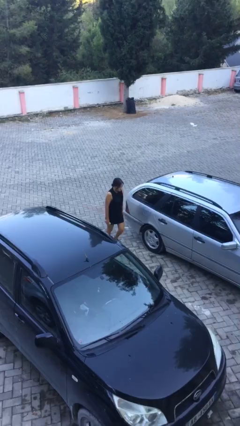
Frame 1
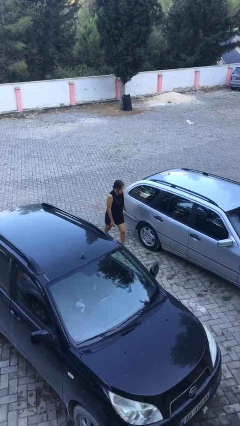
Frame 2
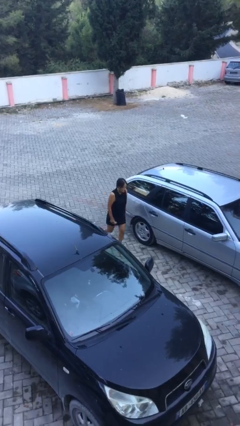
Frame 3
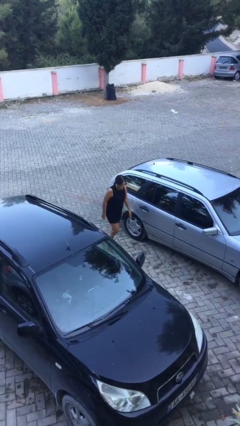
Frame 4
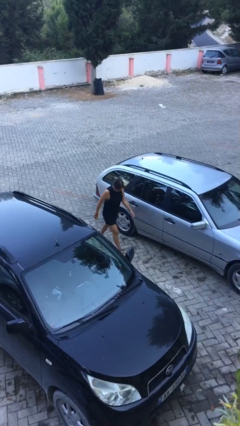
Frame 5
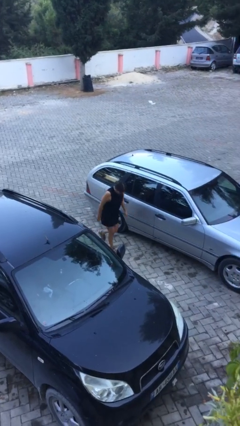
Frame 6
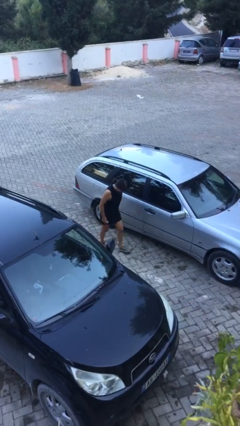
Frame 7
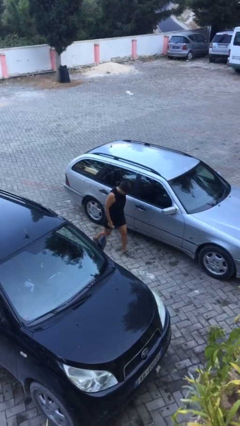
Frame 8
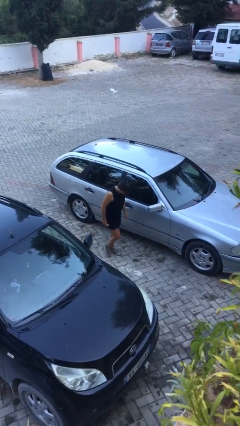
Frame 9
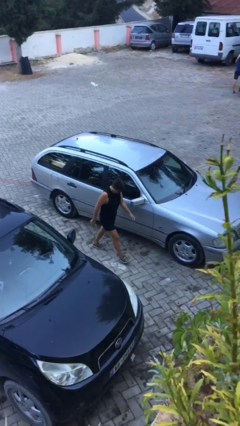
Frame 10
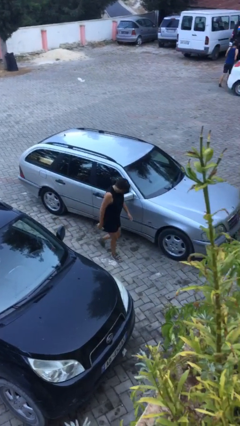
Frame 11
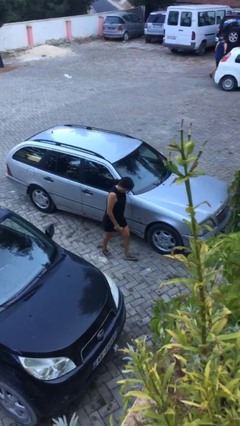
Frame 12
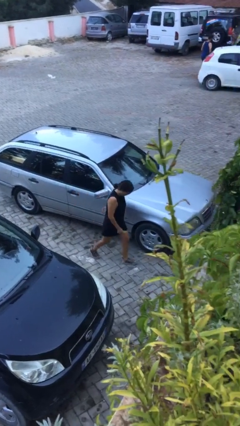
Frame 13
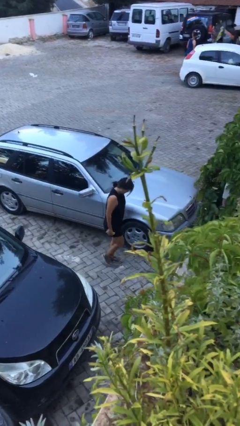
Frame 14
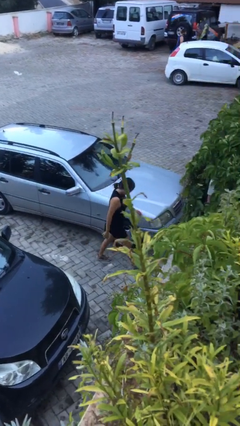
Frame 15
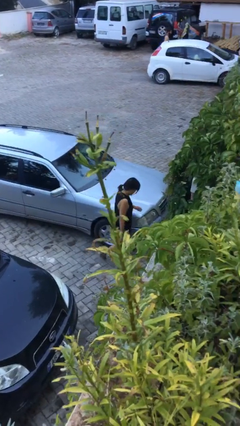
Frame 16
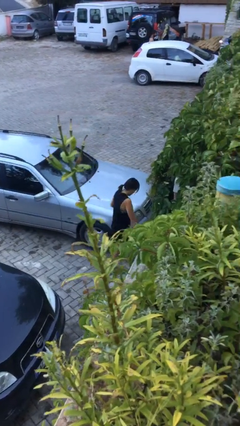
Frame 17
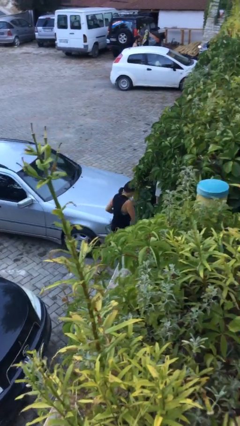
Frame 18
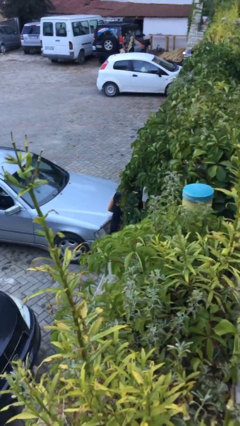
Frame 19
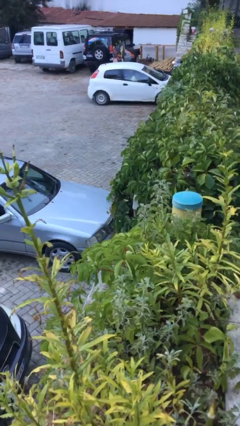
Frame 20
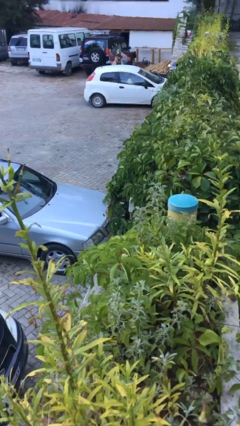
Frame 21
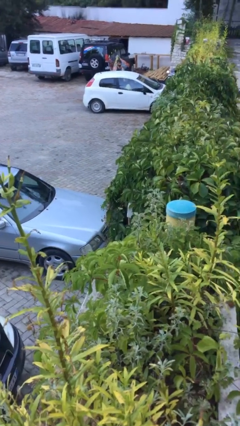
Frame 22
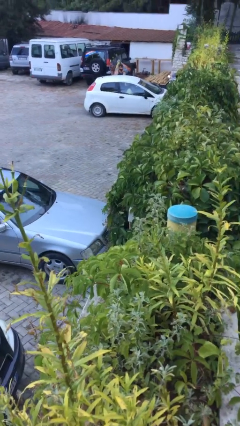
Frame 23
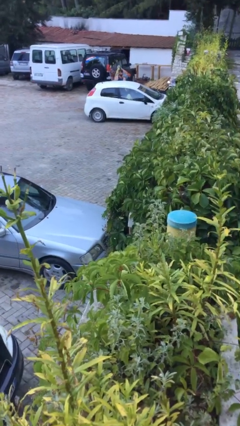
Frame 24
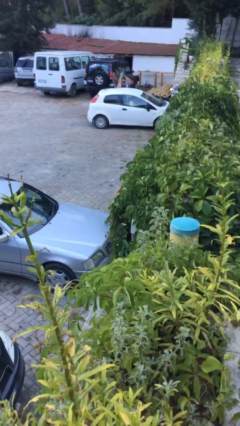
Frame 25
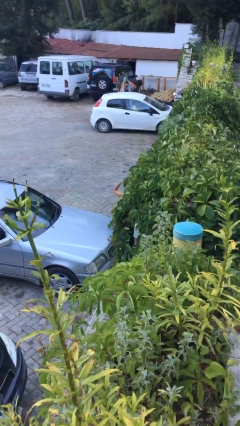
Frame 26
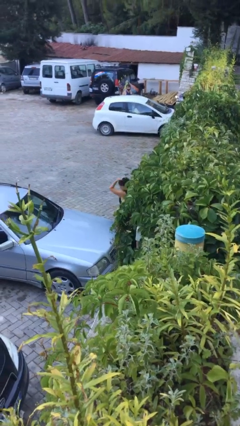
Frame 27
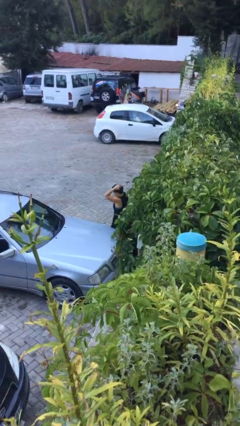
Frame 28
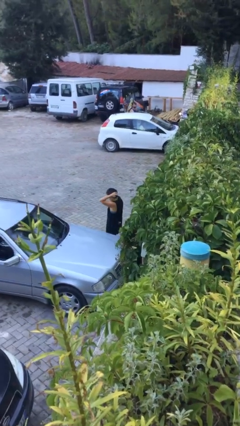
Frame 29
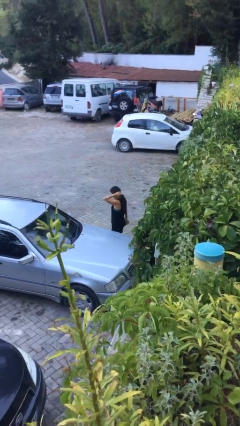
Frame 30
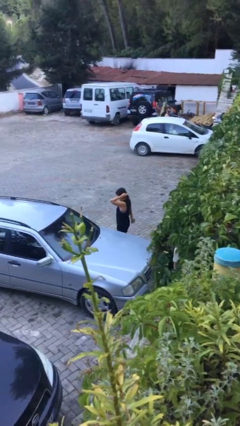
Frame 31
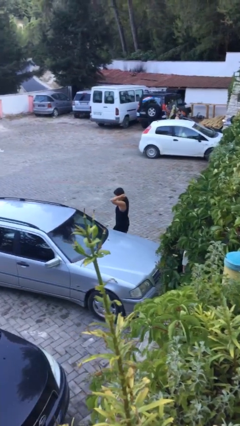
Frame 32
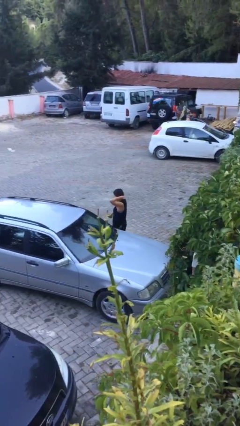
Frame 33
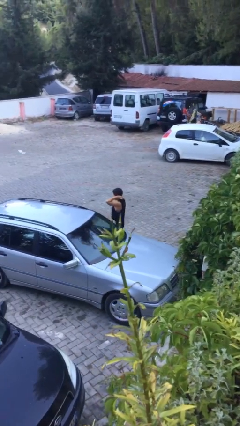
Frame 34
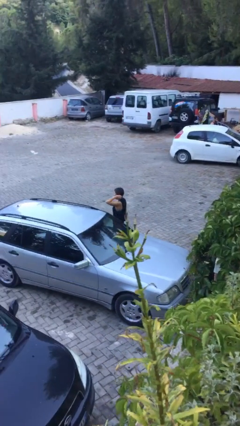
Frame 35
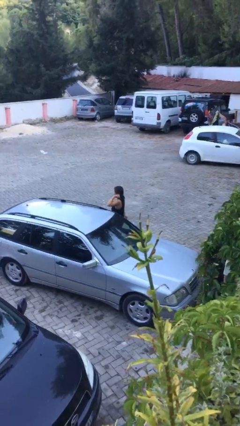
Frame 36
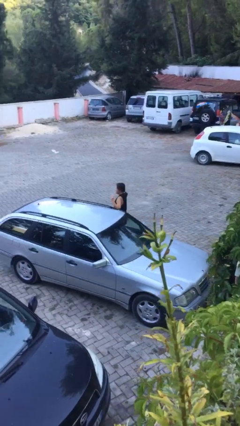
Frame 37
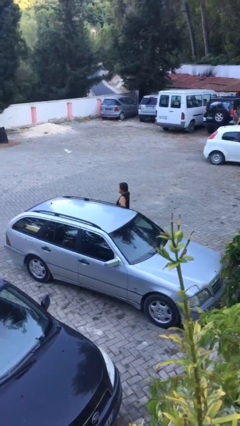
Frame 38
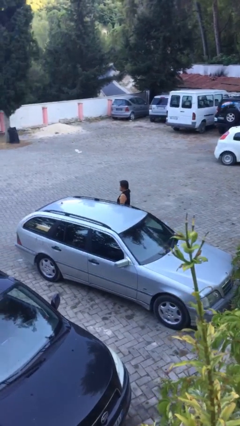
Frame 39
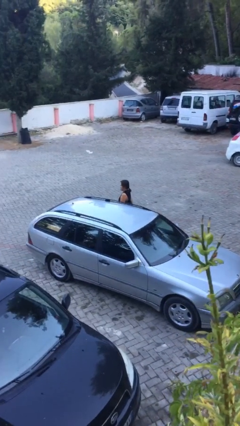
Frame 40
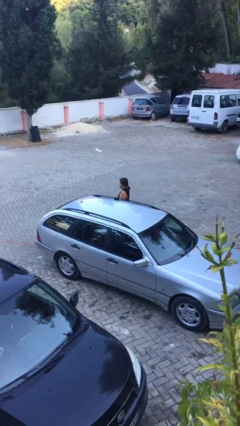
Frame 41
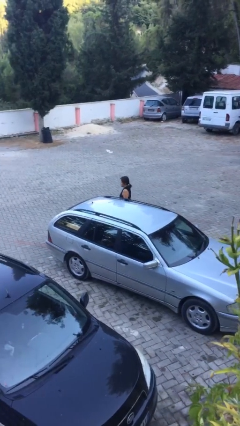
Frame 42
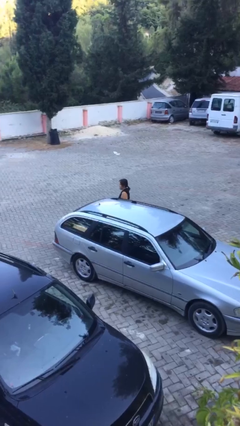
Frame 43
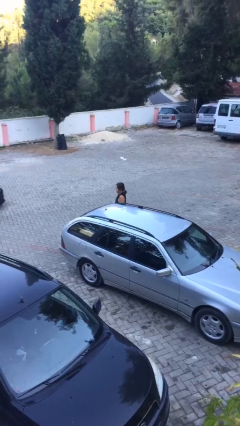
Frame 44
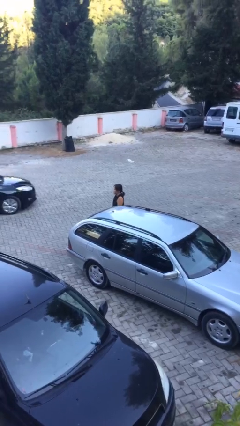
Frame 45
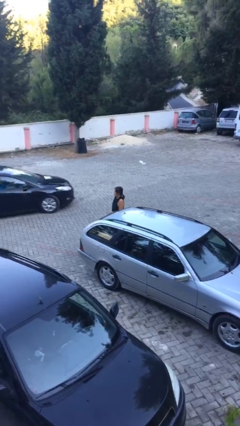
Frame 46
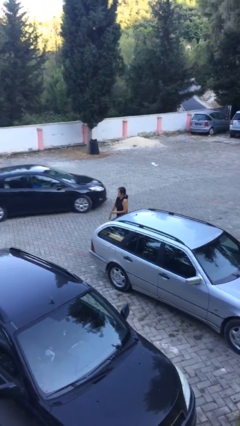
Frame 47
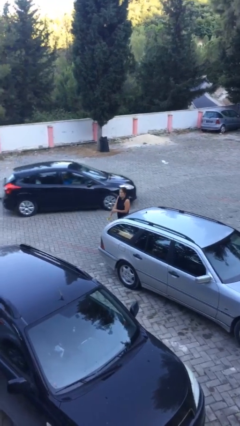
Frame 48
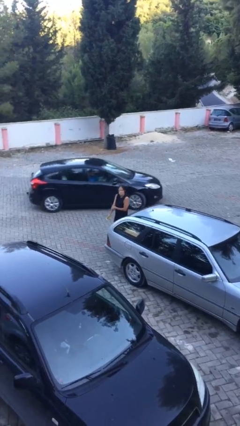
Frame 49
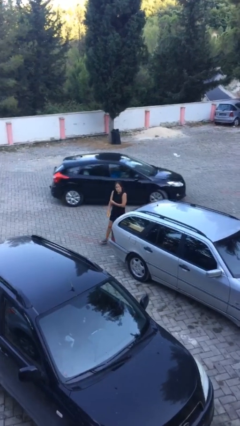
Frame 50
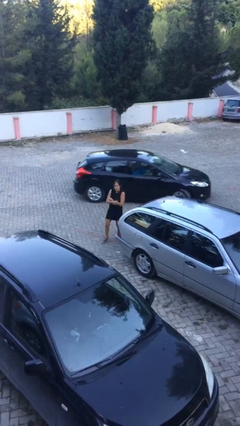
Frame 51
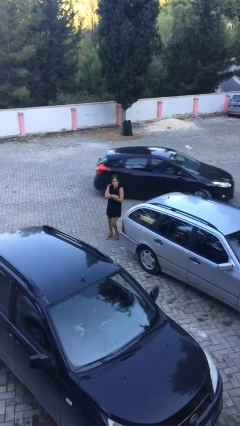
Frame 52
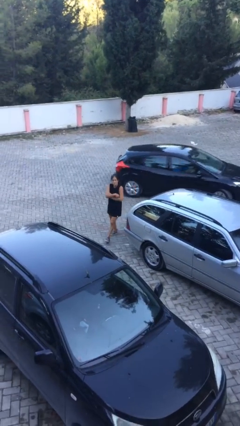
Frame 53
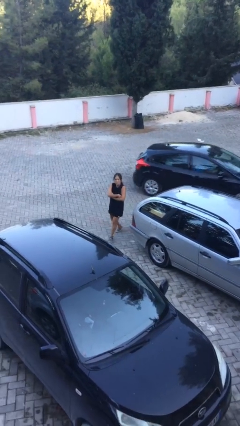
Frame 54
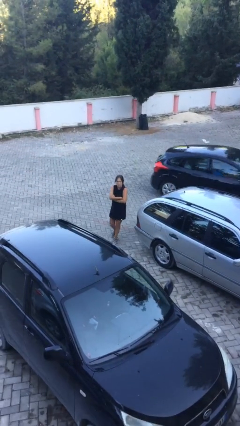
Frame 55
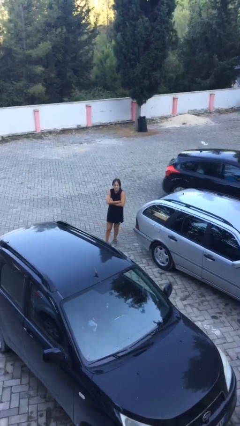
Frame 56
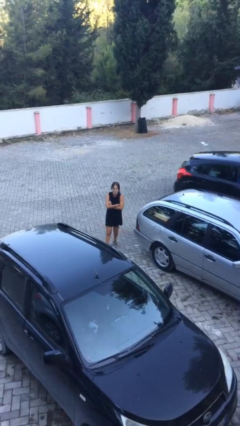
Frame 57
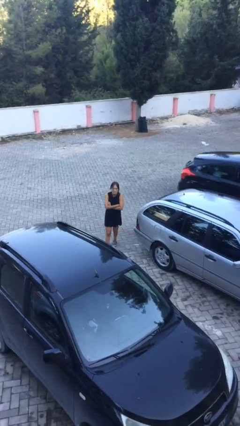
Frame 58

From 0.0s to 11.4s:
person walks around car

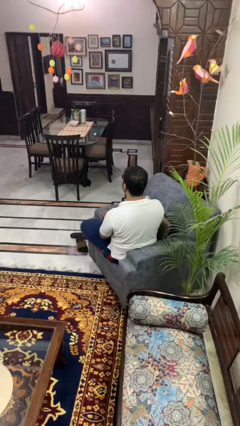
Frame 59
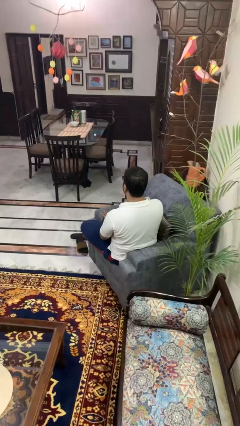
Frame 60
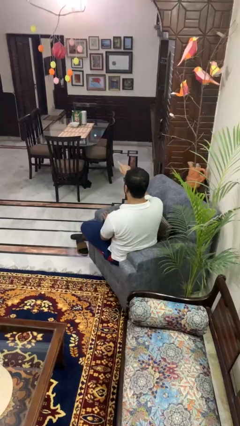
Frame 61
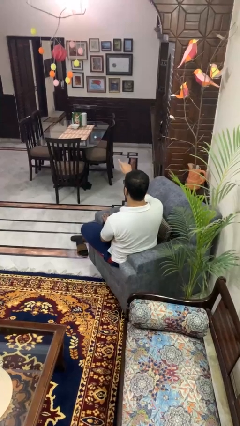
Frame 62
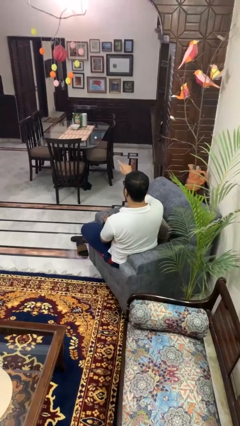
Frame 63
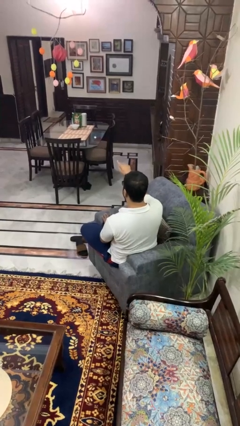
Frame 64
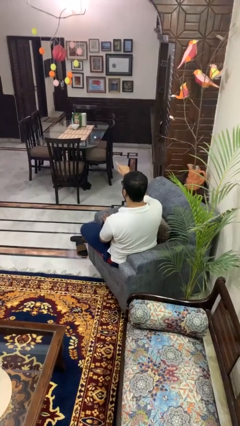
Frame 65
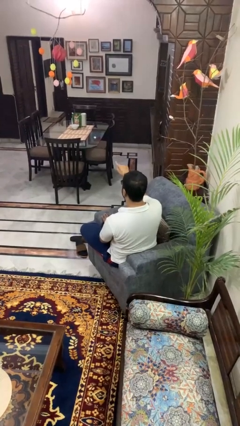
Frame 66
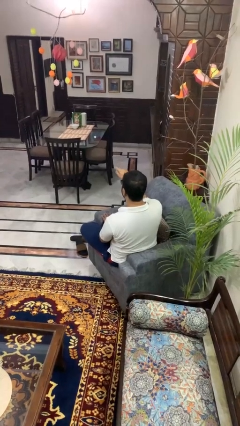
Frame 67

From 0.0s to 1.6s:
person points at person

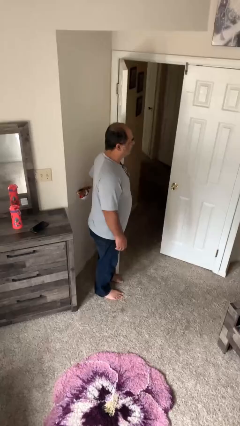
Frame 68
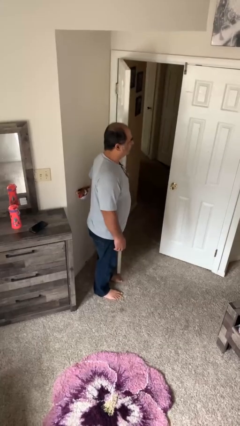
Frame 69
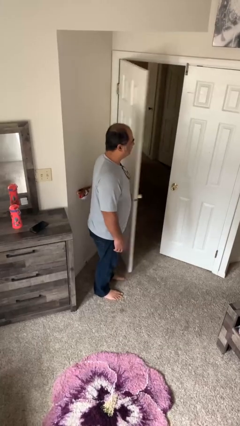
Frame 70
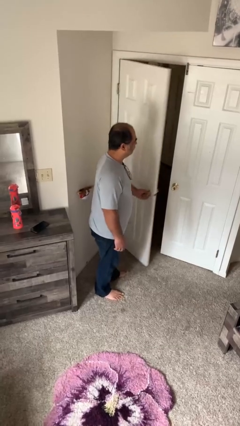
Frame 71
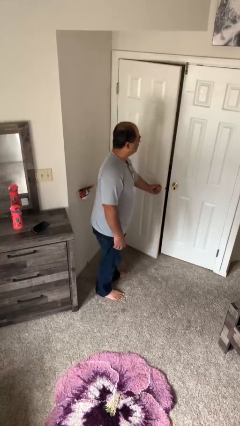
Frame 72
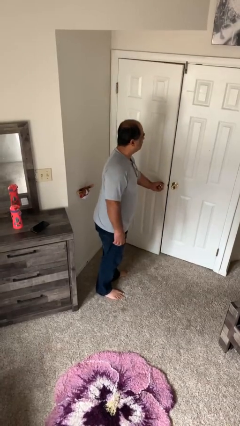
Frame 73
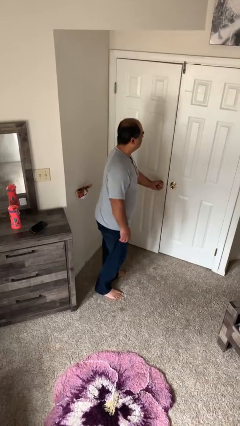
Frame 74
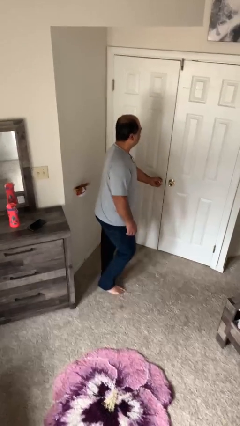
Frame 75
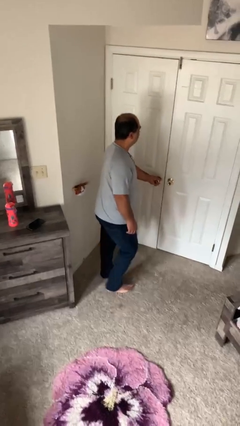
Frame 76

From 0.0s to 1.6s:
person closes facility door

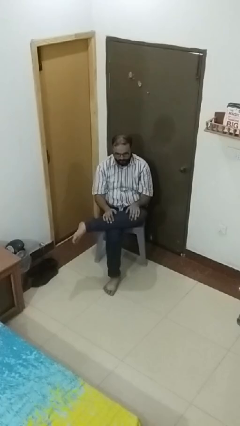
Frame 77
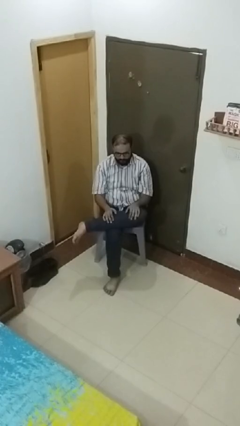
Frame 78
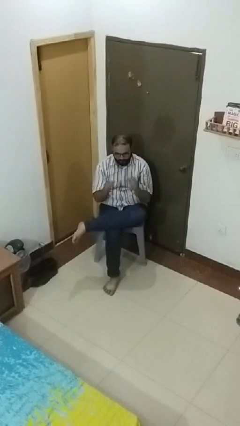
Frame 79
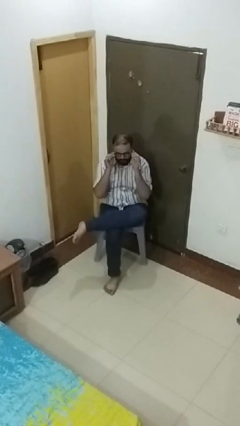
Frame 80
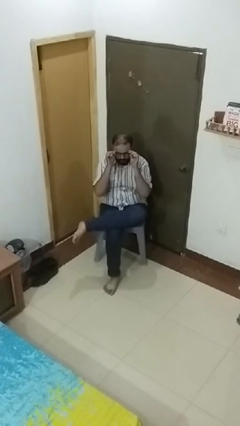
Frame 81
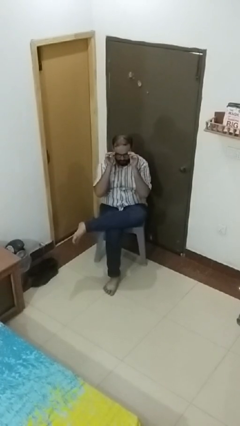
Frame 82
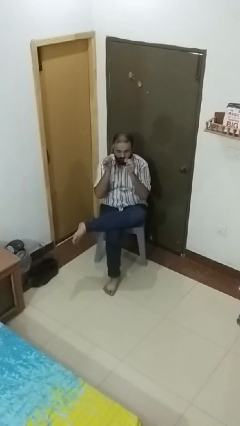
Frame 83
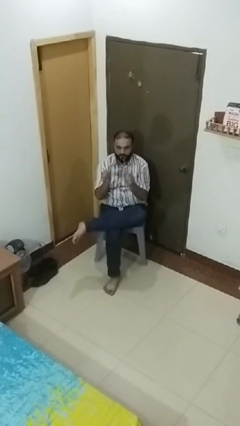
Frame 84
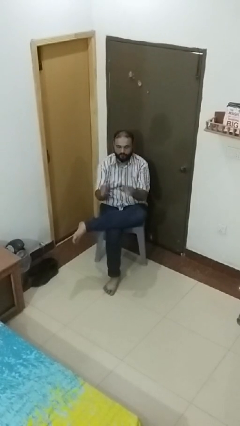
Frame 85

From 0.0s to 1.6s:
person takes off glasses

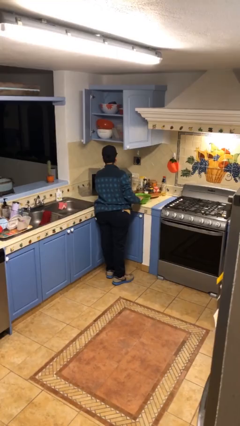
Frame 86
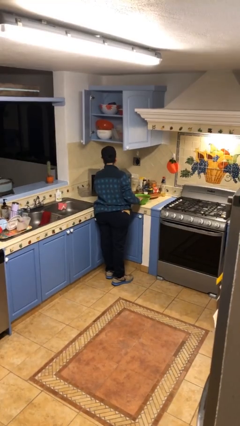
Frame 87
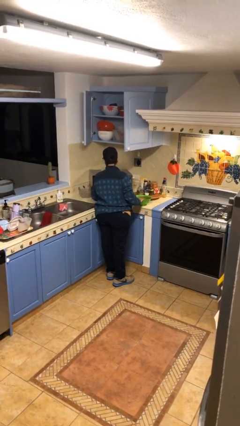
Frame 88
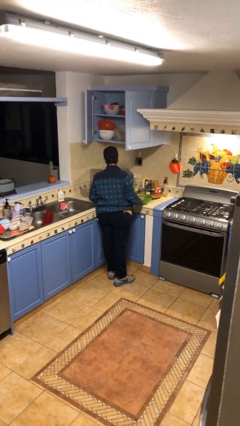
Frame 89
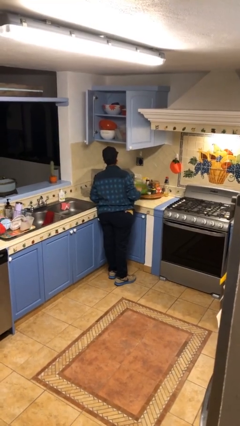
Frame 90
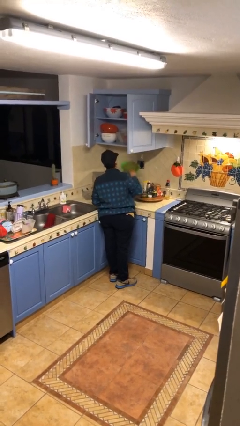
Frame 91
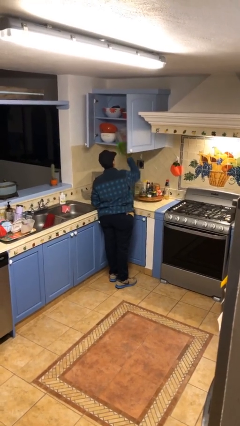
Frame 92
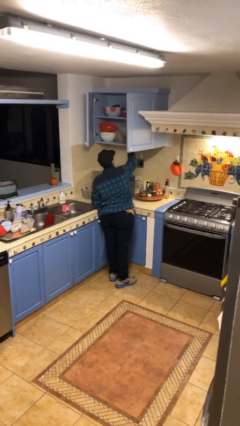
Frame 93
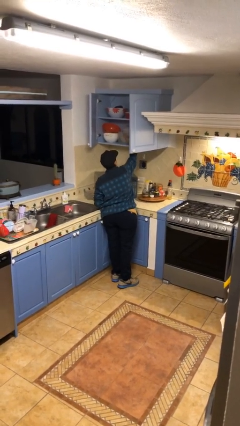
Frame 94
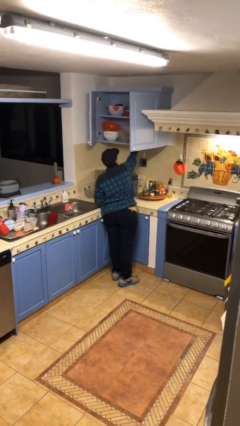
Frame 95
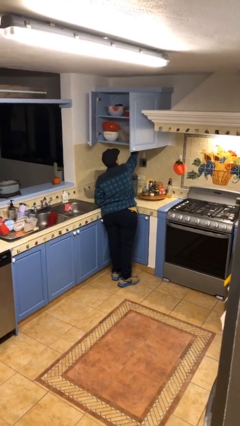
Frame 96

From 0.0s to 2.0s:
person puts object in cabinet
